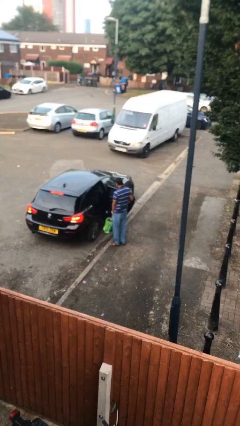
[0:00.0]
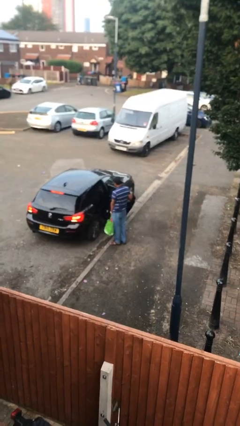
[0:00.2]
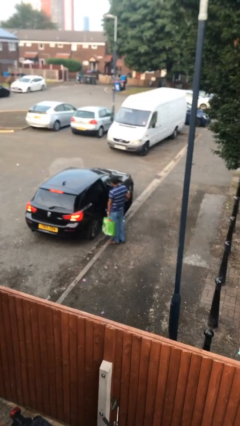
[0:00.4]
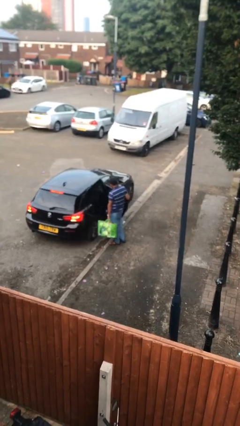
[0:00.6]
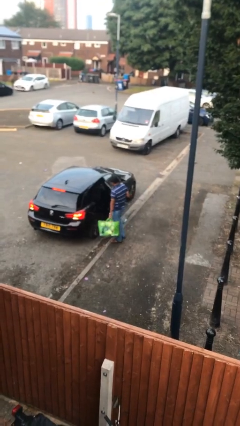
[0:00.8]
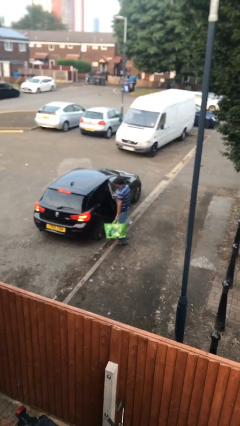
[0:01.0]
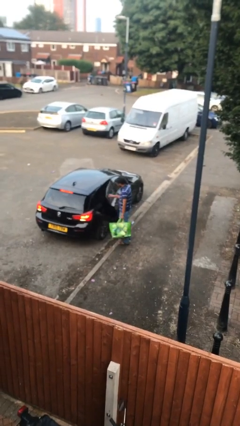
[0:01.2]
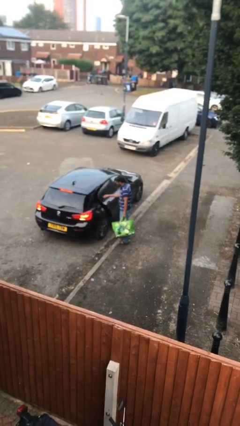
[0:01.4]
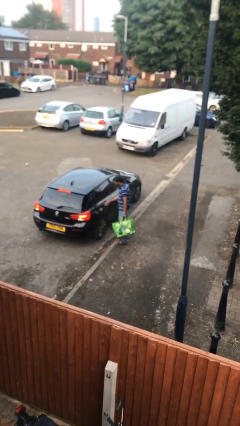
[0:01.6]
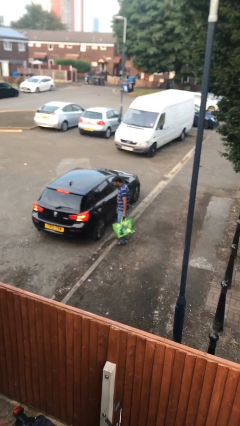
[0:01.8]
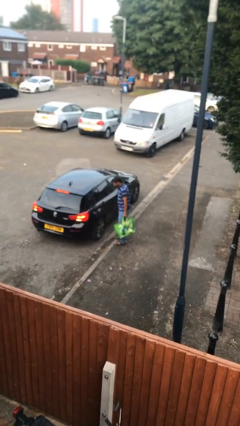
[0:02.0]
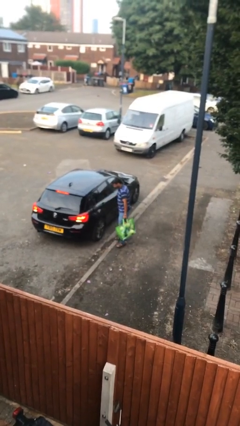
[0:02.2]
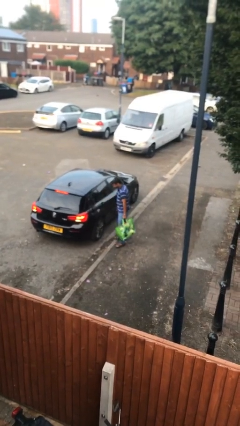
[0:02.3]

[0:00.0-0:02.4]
person closes car door

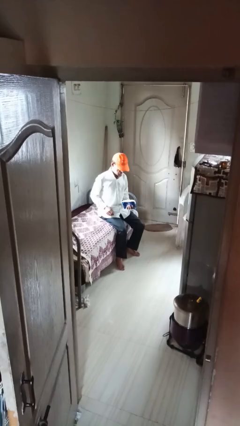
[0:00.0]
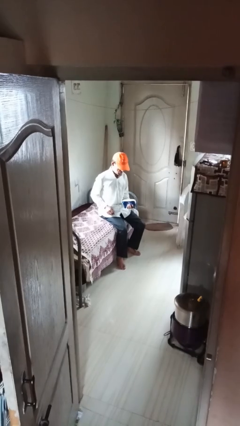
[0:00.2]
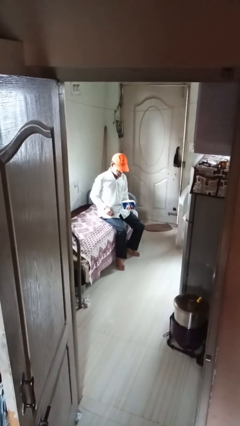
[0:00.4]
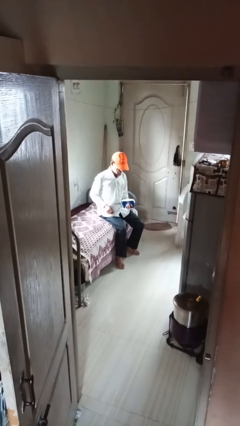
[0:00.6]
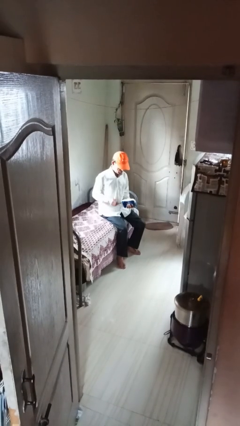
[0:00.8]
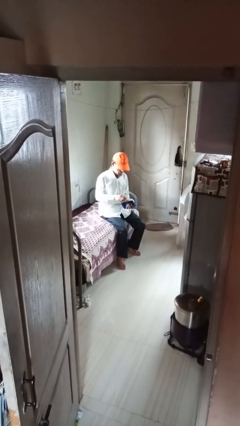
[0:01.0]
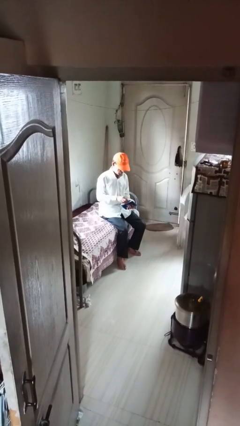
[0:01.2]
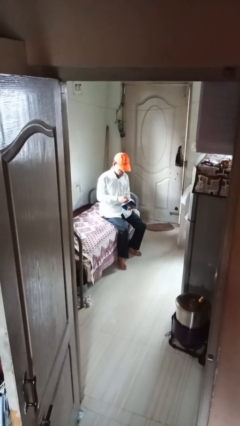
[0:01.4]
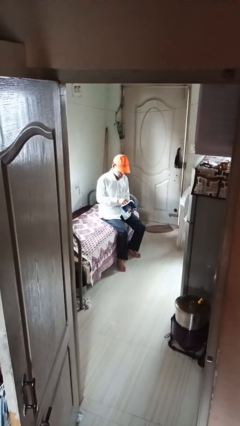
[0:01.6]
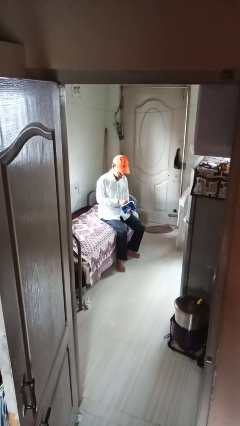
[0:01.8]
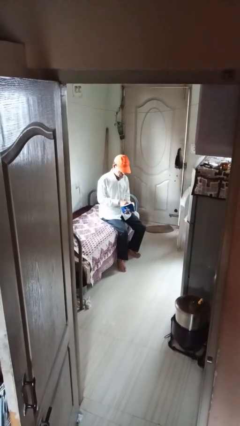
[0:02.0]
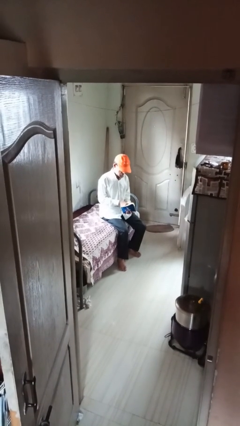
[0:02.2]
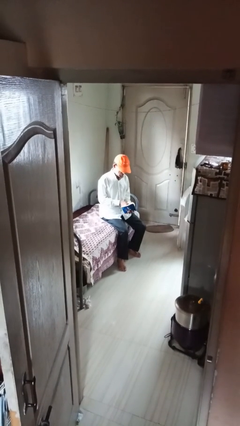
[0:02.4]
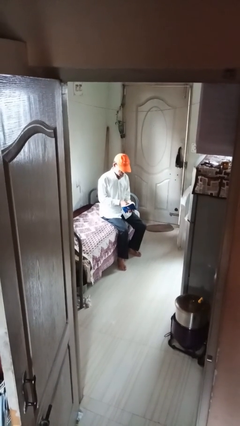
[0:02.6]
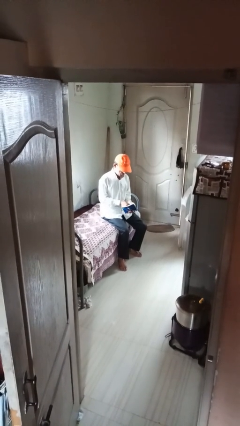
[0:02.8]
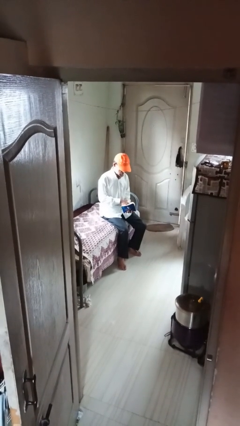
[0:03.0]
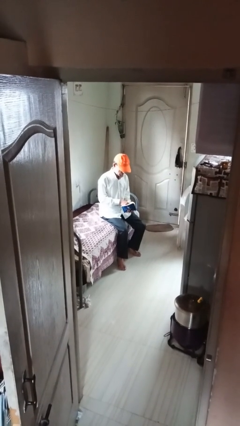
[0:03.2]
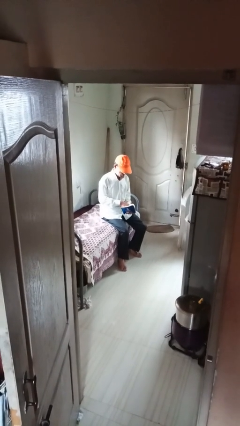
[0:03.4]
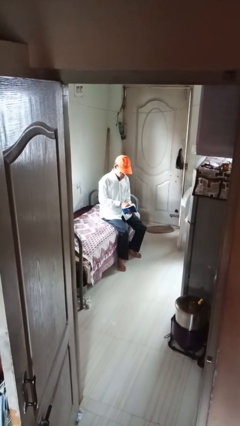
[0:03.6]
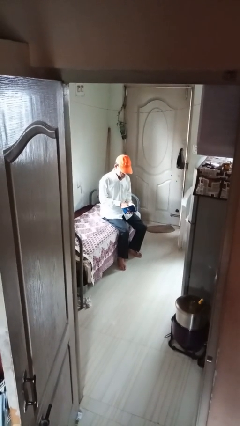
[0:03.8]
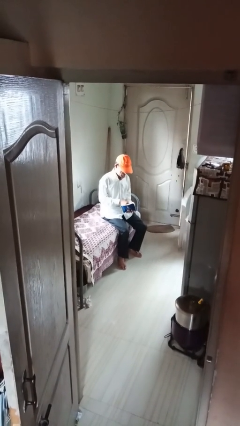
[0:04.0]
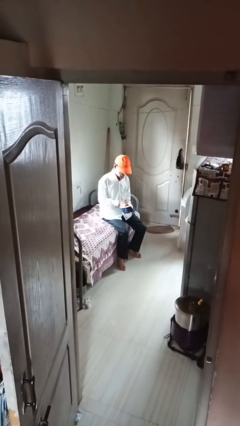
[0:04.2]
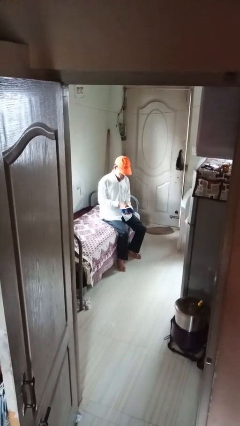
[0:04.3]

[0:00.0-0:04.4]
person searches in purse

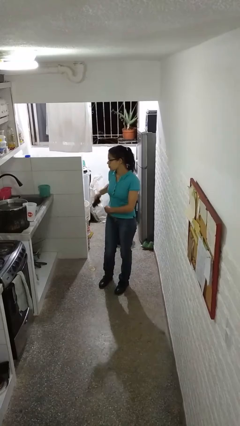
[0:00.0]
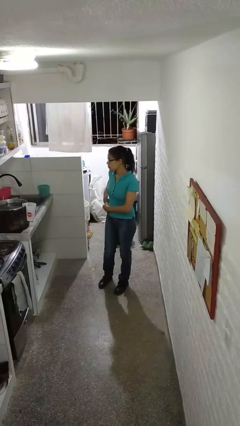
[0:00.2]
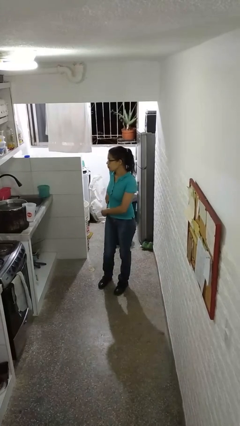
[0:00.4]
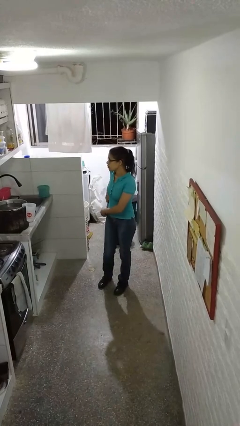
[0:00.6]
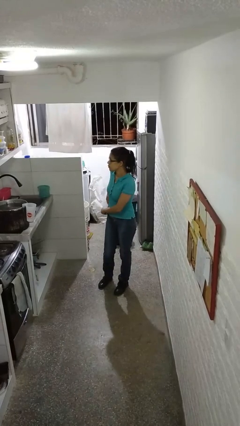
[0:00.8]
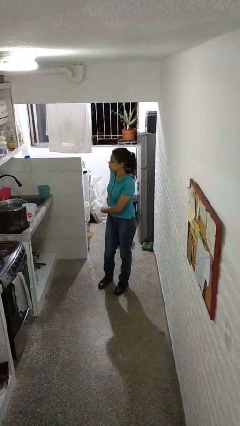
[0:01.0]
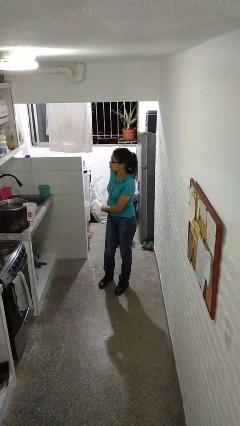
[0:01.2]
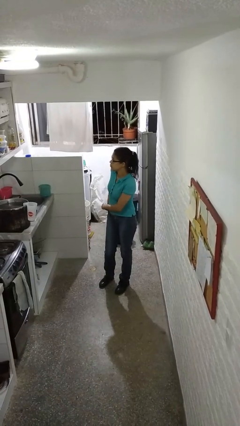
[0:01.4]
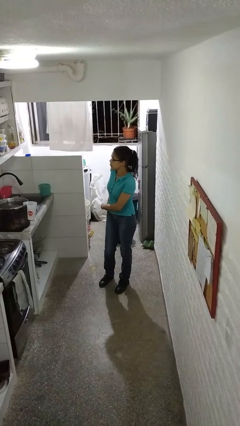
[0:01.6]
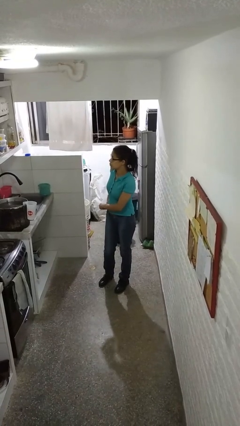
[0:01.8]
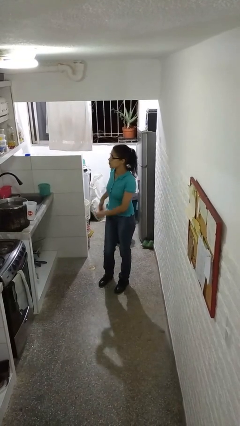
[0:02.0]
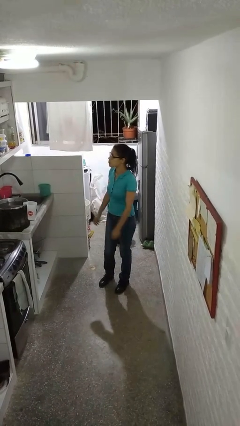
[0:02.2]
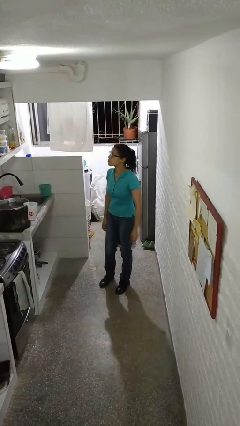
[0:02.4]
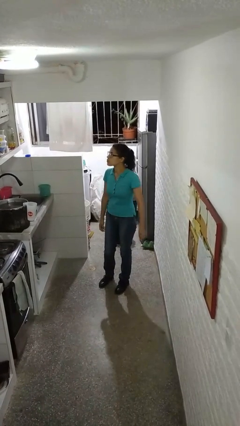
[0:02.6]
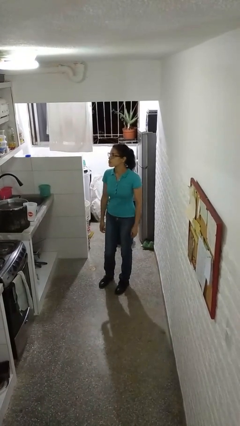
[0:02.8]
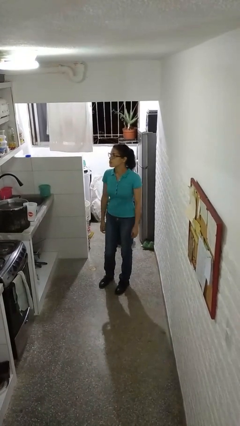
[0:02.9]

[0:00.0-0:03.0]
person puts phone into pocket

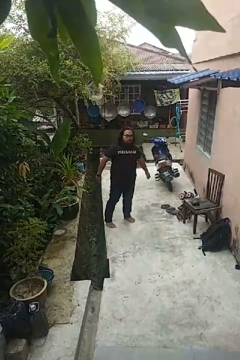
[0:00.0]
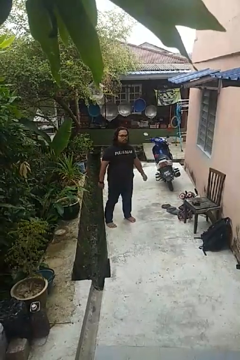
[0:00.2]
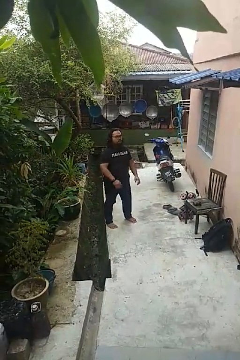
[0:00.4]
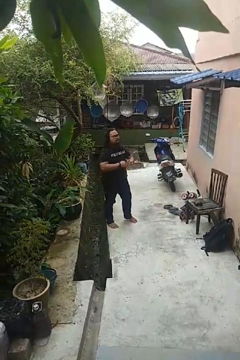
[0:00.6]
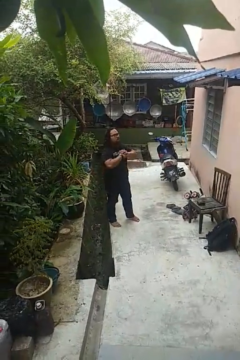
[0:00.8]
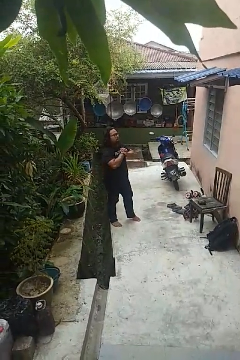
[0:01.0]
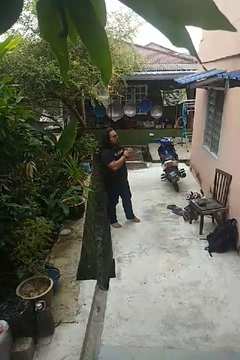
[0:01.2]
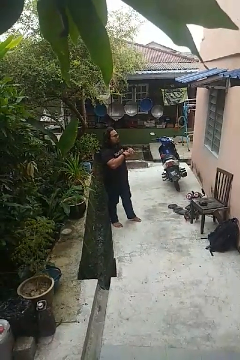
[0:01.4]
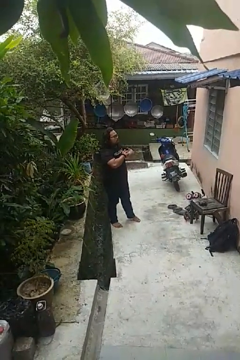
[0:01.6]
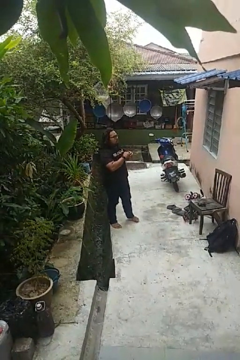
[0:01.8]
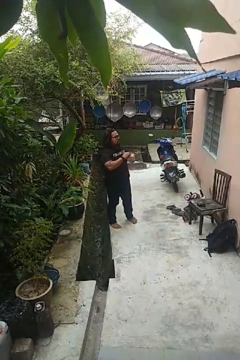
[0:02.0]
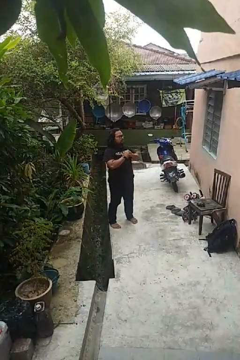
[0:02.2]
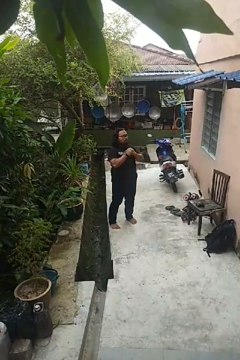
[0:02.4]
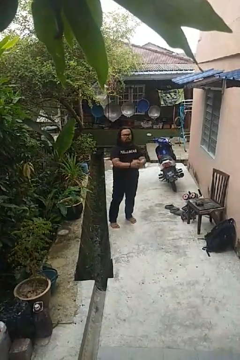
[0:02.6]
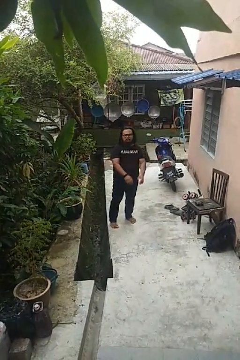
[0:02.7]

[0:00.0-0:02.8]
person cracks knuckles

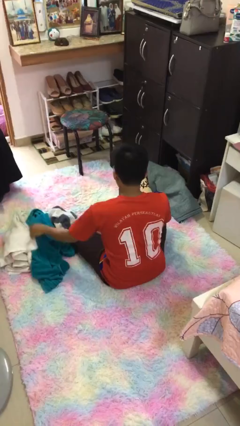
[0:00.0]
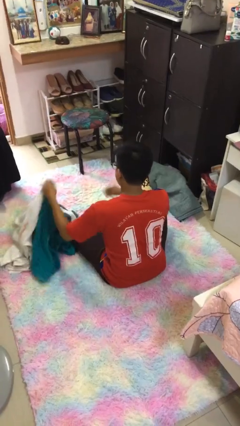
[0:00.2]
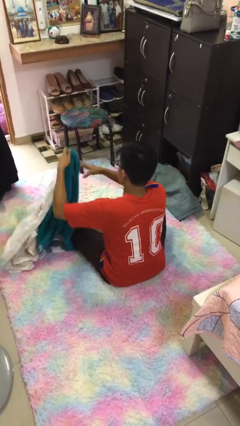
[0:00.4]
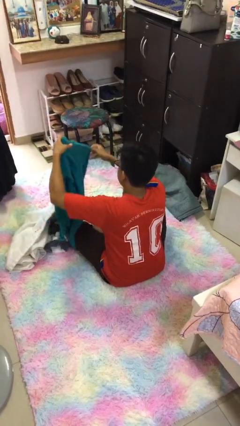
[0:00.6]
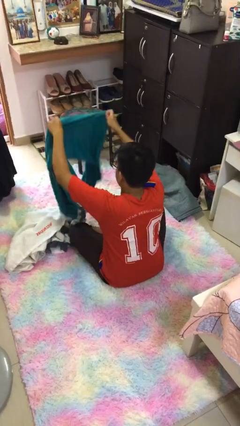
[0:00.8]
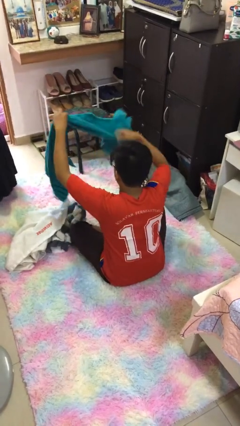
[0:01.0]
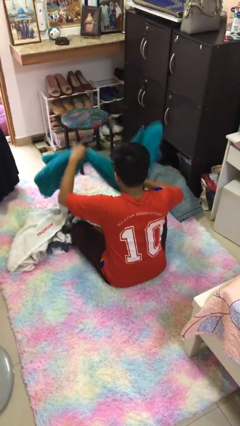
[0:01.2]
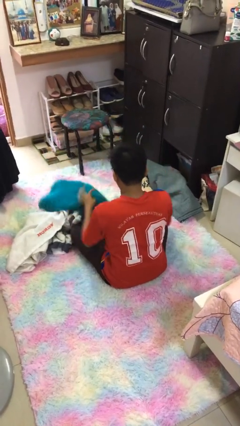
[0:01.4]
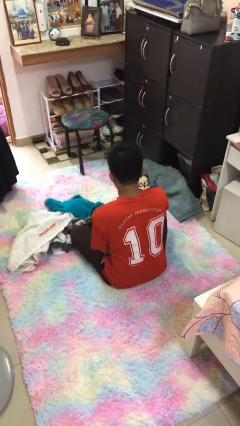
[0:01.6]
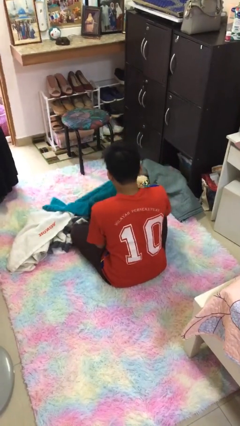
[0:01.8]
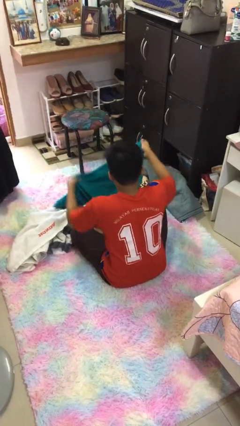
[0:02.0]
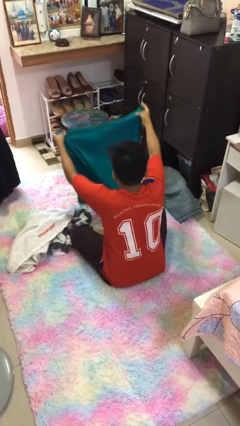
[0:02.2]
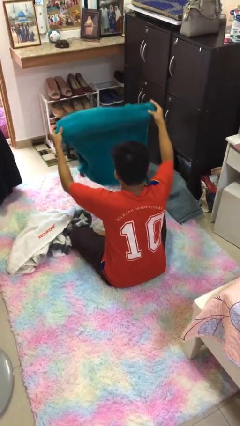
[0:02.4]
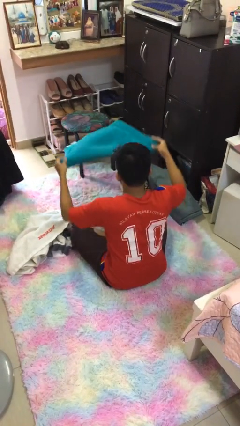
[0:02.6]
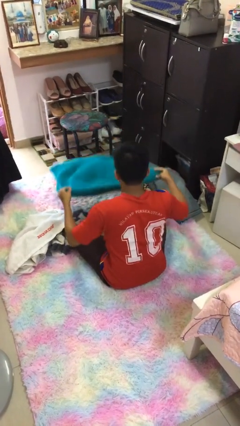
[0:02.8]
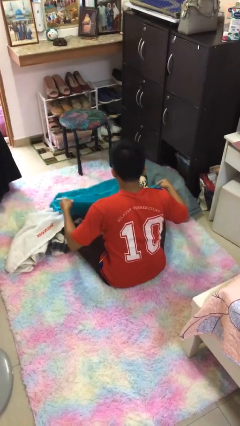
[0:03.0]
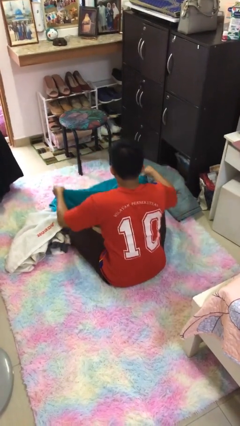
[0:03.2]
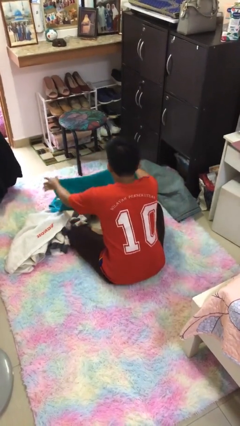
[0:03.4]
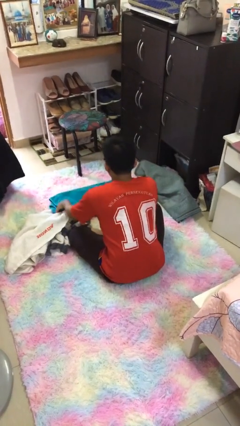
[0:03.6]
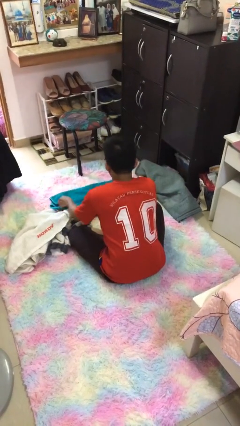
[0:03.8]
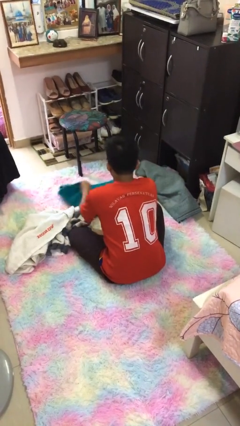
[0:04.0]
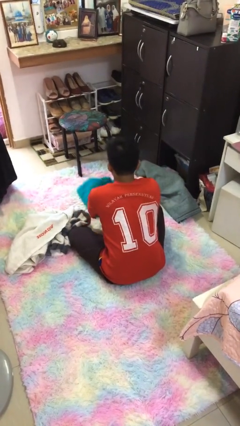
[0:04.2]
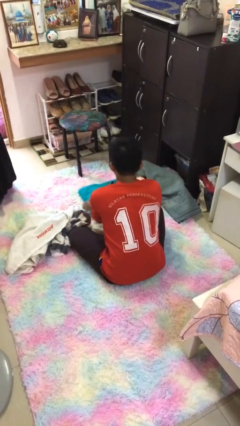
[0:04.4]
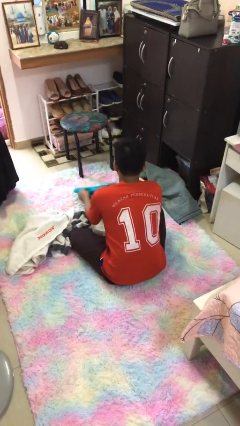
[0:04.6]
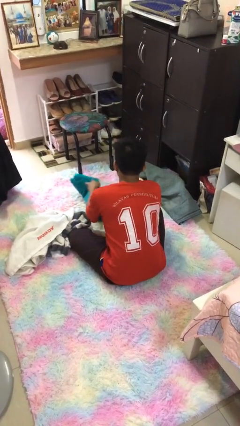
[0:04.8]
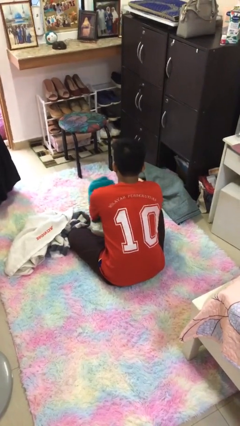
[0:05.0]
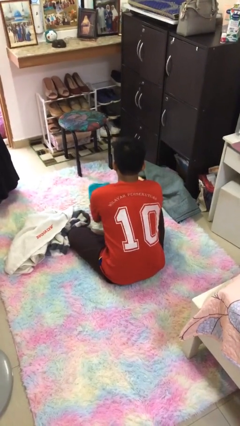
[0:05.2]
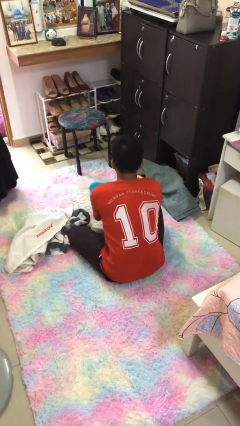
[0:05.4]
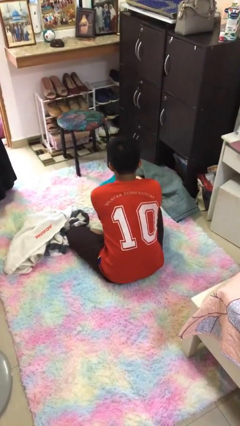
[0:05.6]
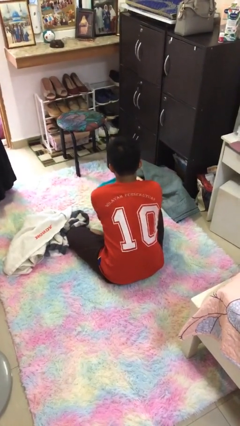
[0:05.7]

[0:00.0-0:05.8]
person folds towel
